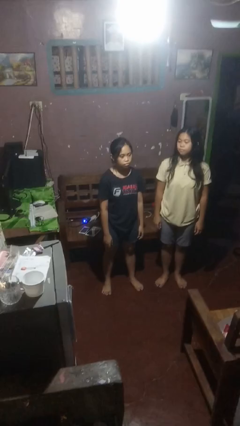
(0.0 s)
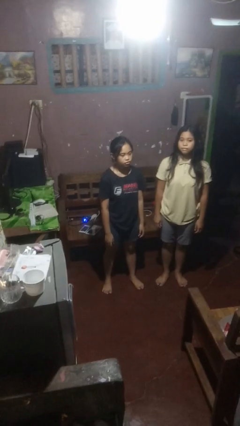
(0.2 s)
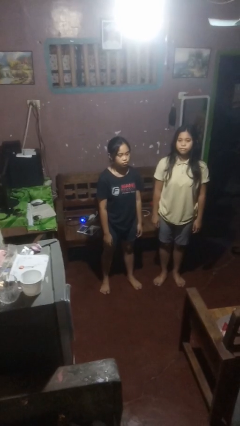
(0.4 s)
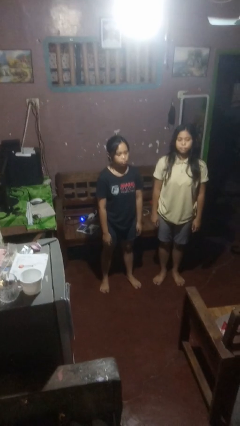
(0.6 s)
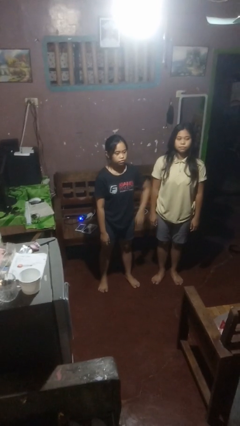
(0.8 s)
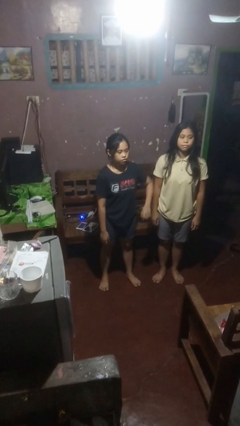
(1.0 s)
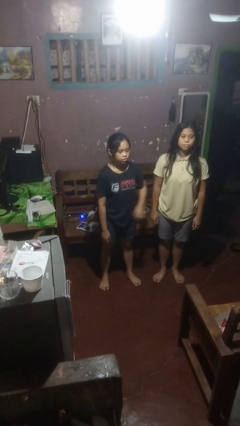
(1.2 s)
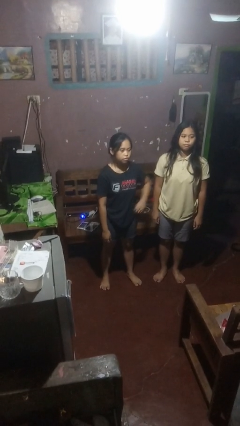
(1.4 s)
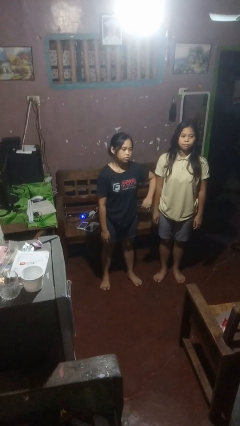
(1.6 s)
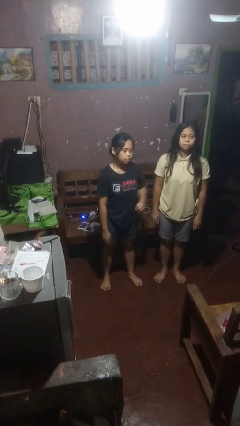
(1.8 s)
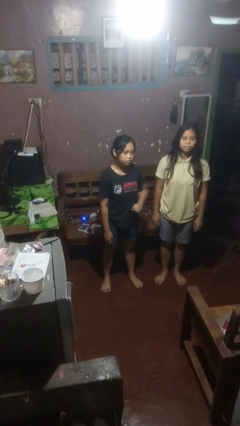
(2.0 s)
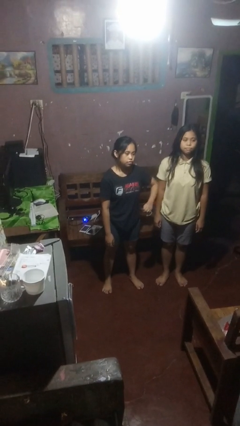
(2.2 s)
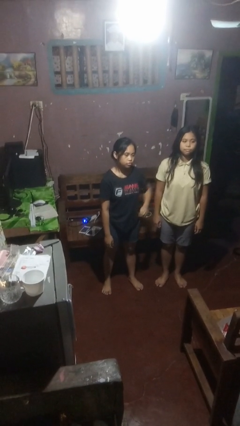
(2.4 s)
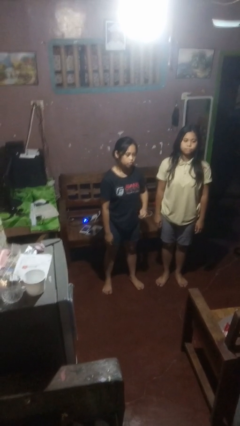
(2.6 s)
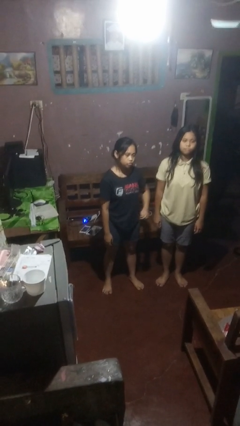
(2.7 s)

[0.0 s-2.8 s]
person nudges person with elbow

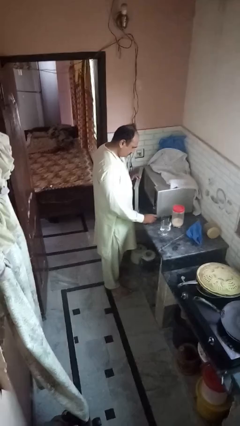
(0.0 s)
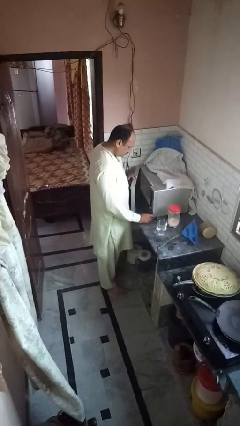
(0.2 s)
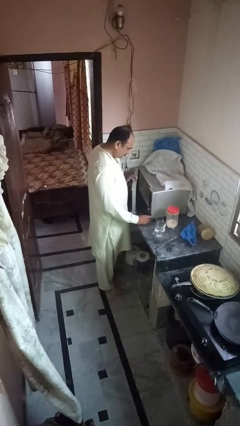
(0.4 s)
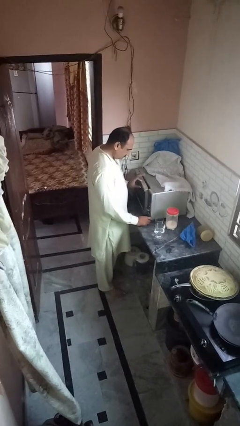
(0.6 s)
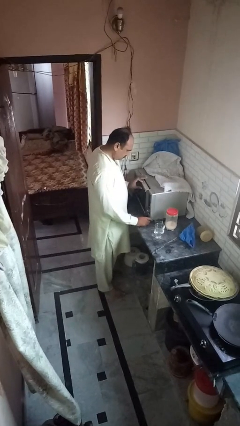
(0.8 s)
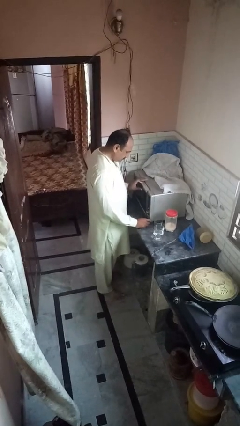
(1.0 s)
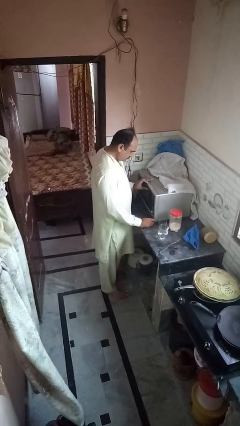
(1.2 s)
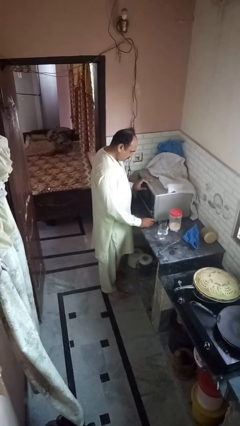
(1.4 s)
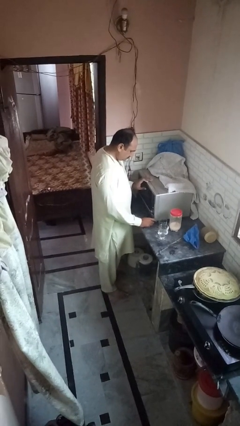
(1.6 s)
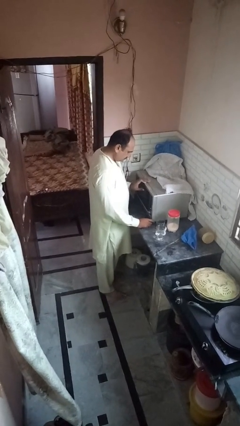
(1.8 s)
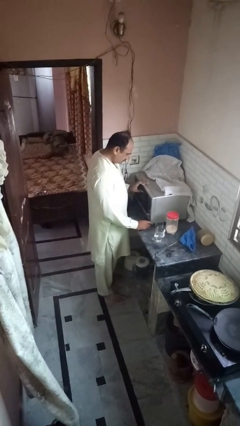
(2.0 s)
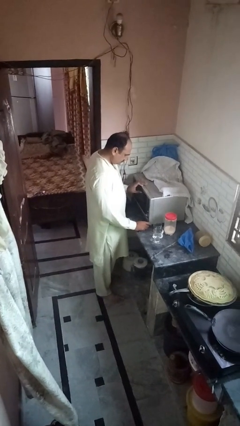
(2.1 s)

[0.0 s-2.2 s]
person closes microwave

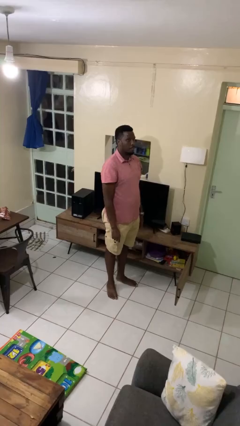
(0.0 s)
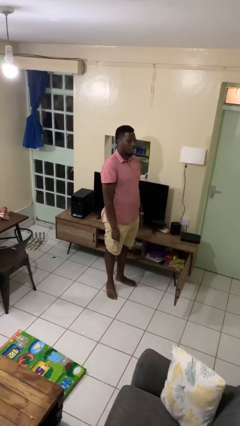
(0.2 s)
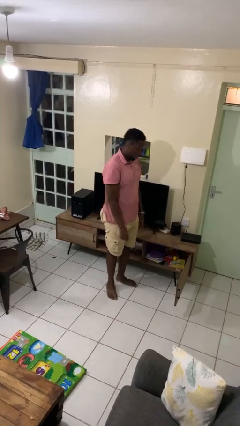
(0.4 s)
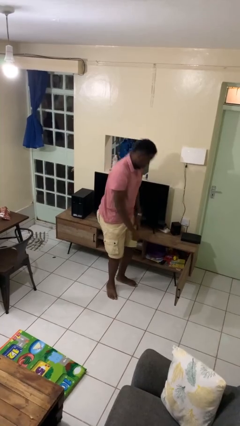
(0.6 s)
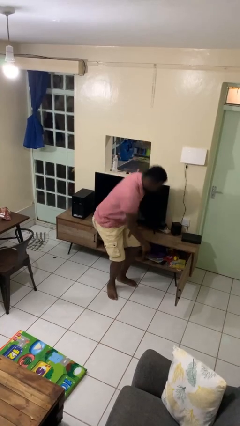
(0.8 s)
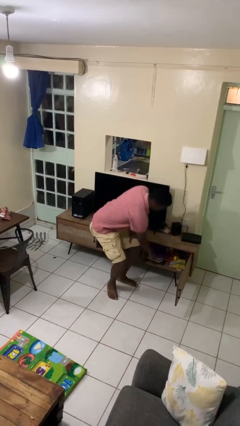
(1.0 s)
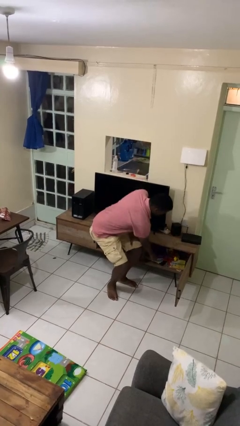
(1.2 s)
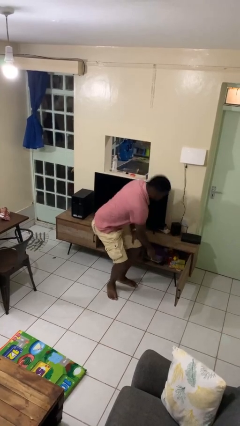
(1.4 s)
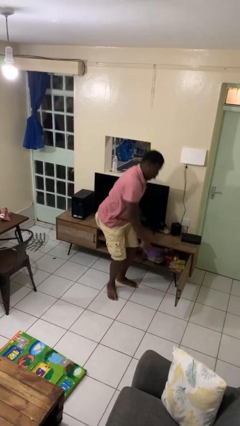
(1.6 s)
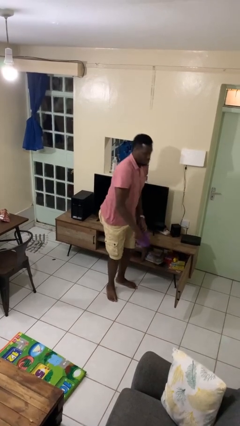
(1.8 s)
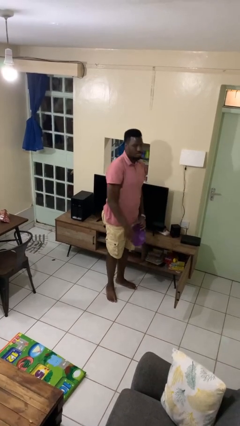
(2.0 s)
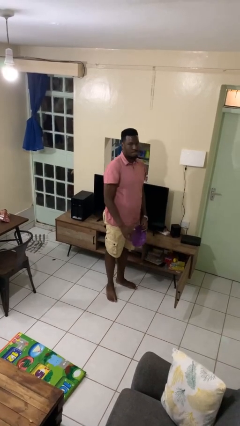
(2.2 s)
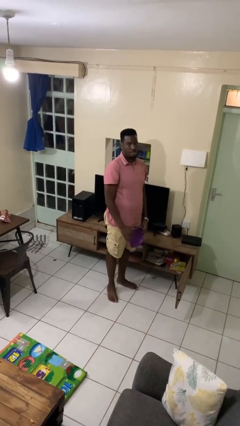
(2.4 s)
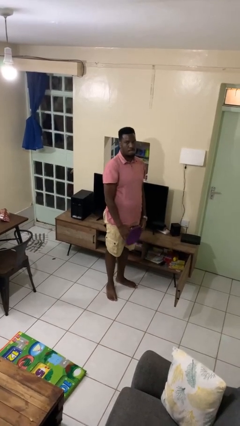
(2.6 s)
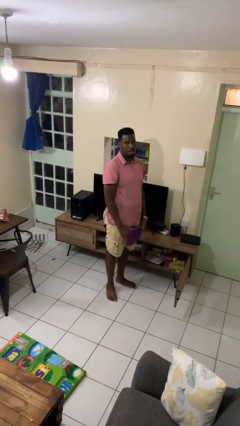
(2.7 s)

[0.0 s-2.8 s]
person picks up object from cabinet

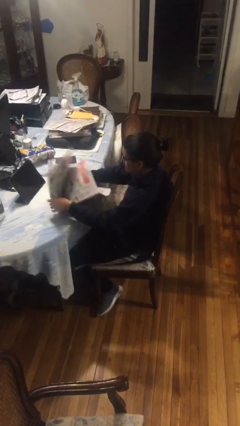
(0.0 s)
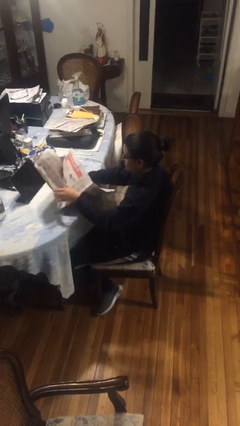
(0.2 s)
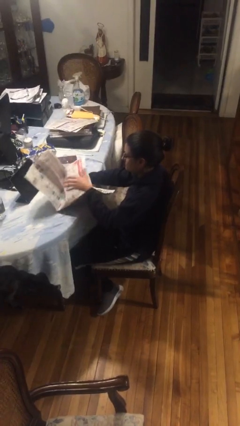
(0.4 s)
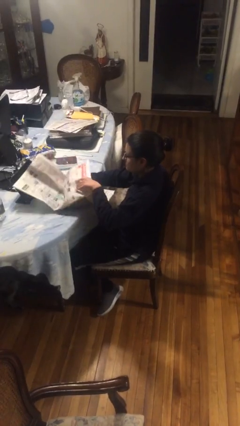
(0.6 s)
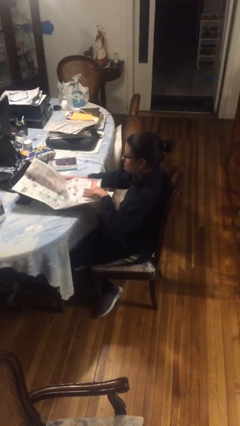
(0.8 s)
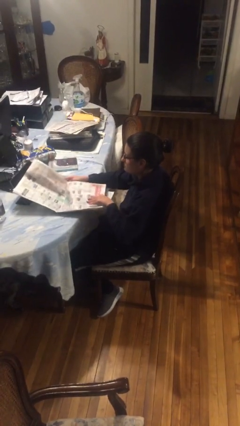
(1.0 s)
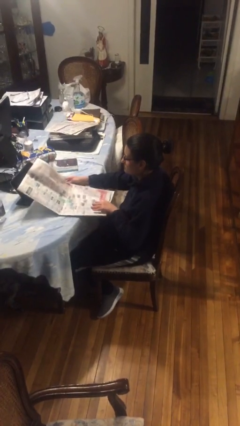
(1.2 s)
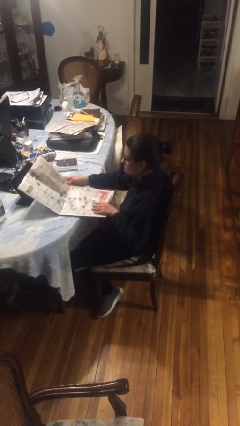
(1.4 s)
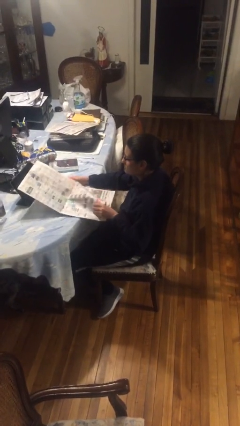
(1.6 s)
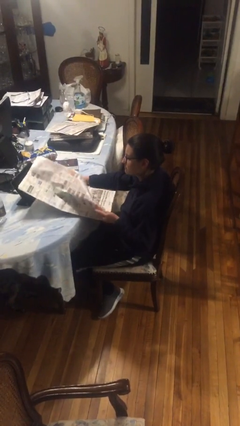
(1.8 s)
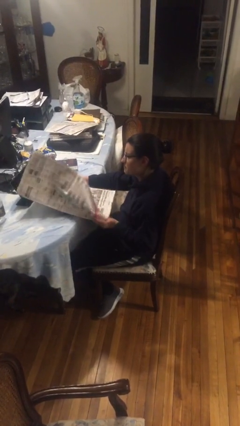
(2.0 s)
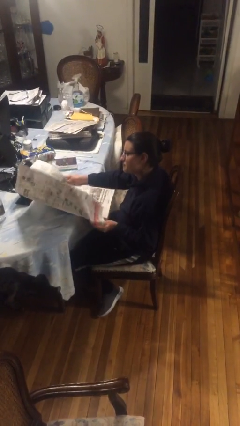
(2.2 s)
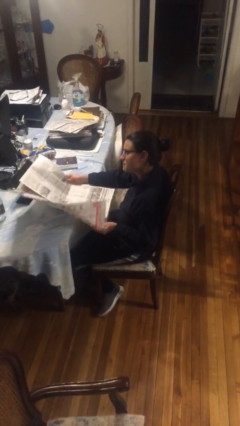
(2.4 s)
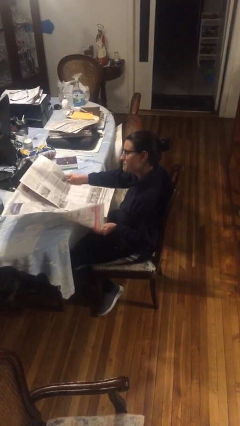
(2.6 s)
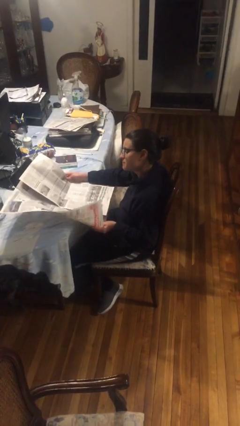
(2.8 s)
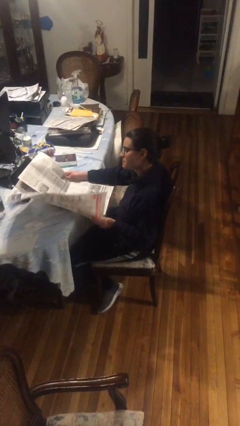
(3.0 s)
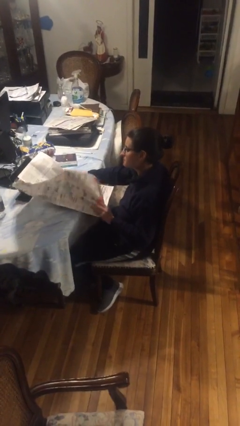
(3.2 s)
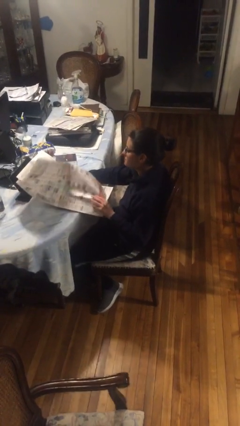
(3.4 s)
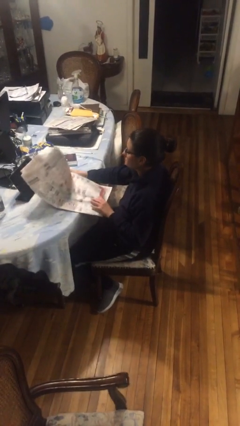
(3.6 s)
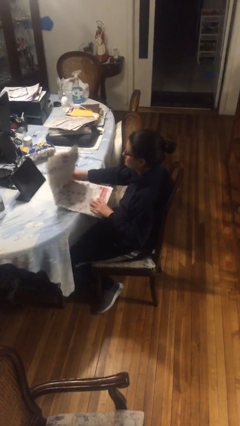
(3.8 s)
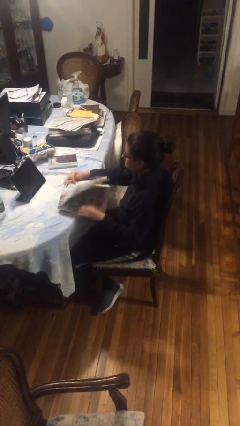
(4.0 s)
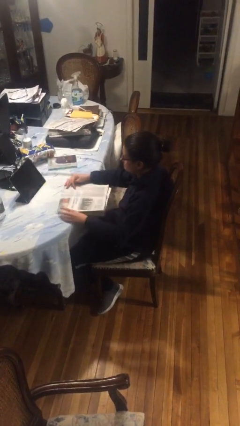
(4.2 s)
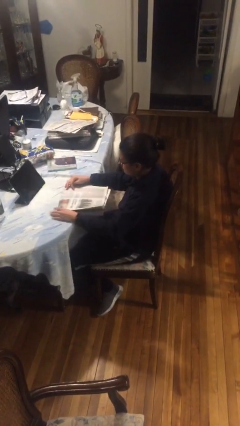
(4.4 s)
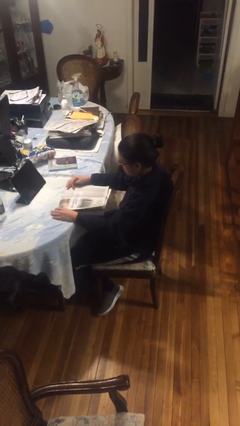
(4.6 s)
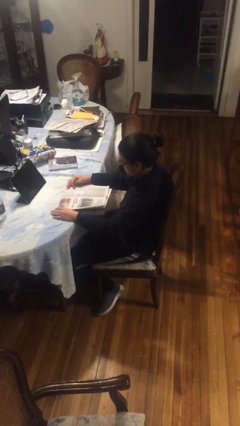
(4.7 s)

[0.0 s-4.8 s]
person reads newspaper

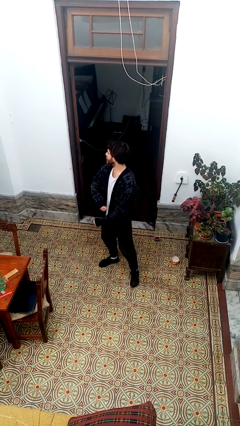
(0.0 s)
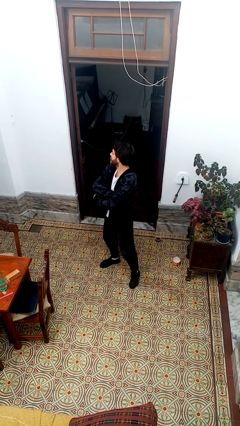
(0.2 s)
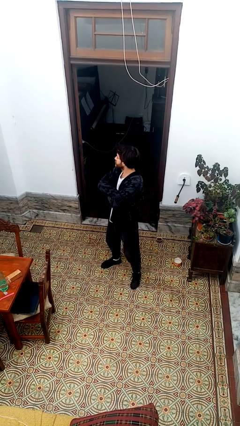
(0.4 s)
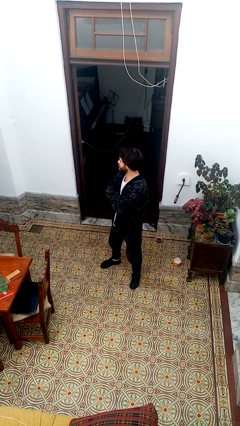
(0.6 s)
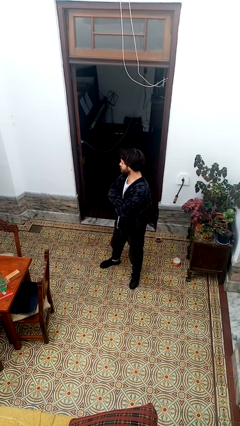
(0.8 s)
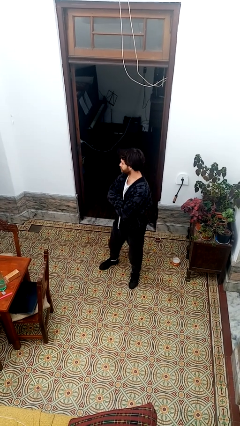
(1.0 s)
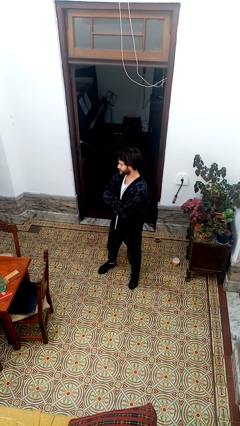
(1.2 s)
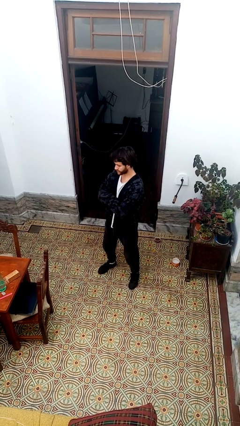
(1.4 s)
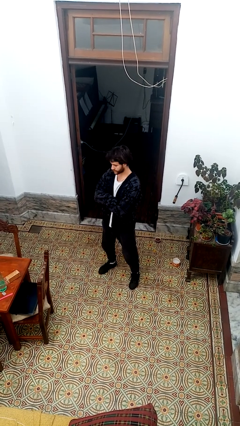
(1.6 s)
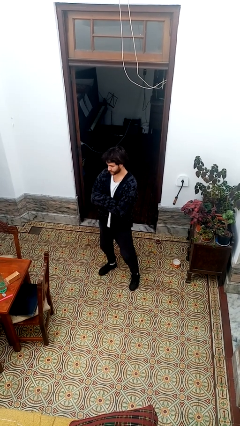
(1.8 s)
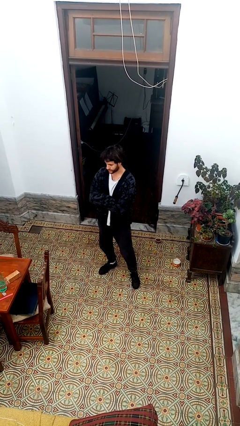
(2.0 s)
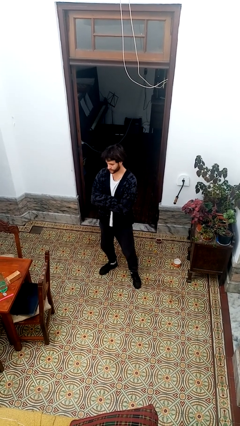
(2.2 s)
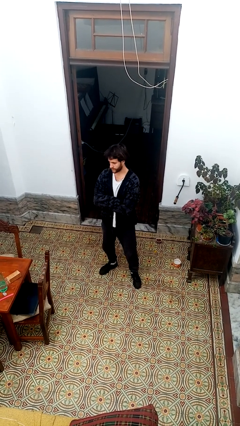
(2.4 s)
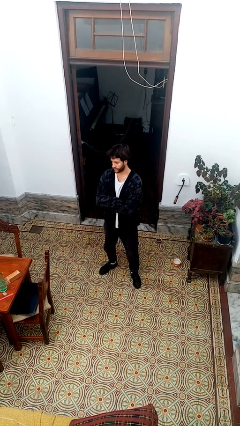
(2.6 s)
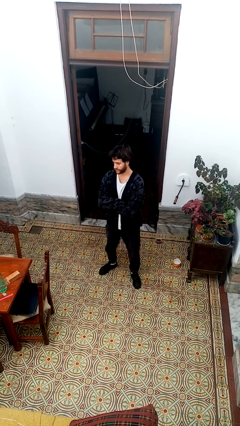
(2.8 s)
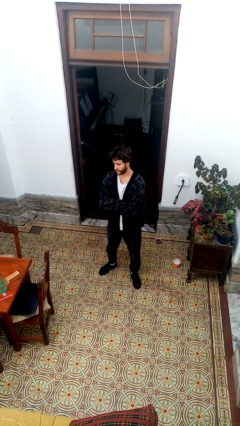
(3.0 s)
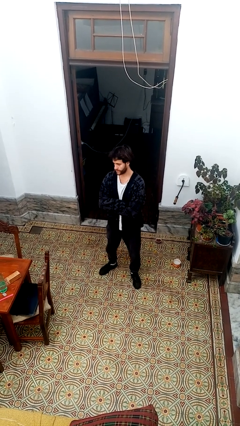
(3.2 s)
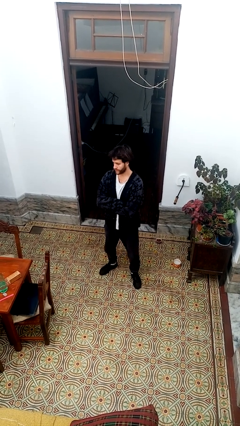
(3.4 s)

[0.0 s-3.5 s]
person crosses arms

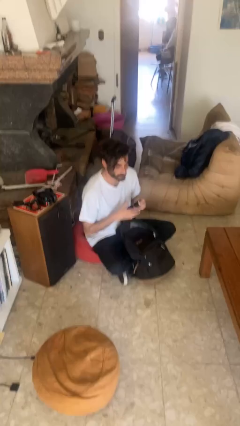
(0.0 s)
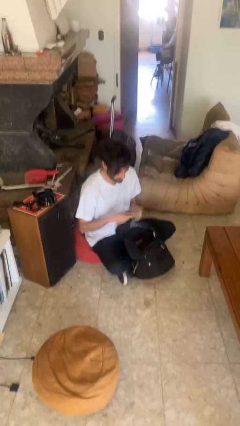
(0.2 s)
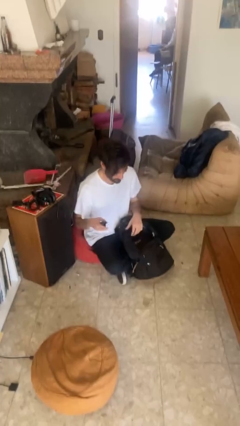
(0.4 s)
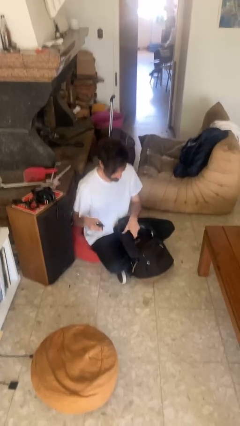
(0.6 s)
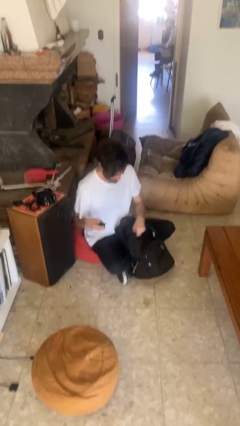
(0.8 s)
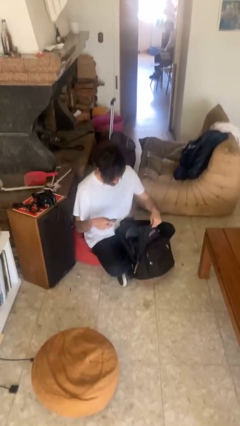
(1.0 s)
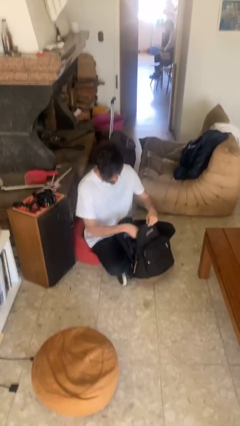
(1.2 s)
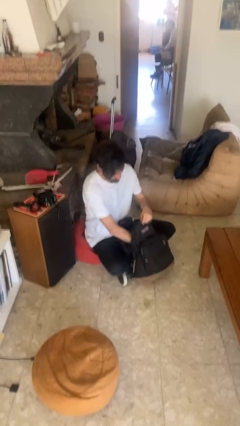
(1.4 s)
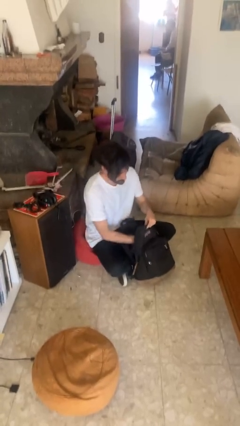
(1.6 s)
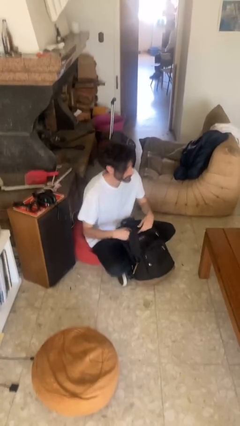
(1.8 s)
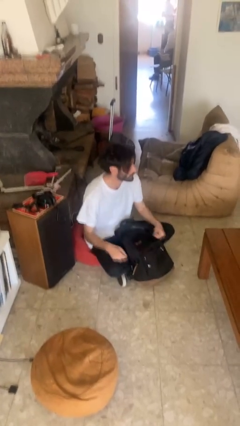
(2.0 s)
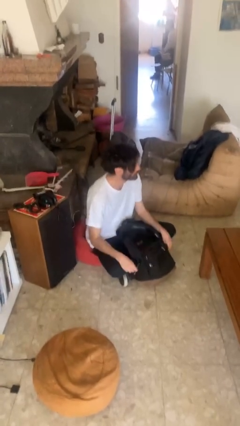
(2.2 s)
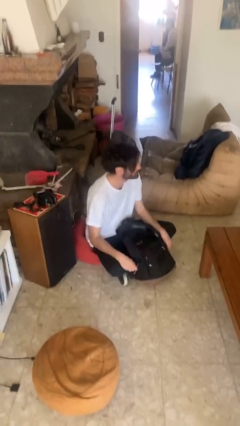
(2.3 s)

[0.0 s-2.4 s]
person puts object into backpack
